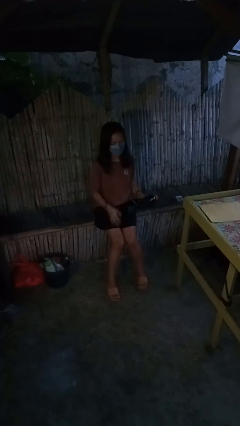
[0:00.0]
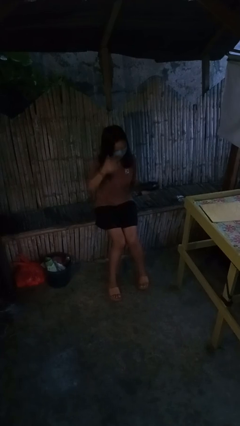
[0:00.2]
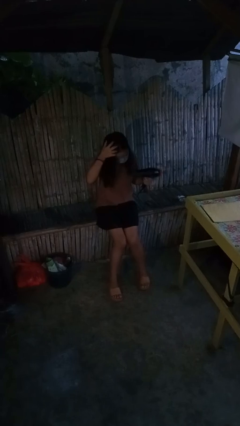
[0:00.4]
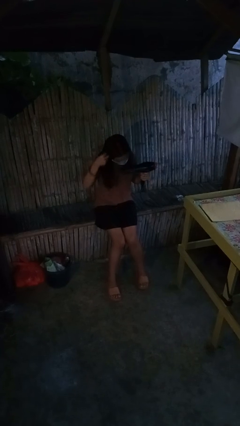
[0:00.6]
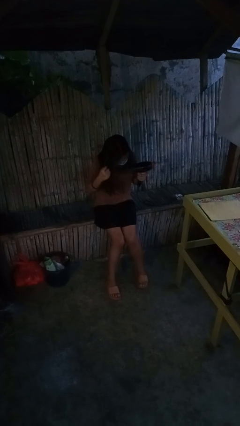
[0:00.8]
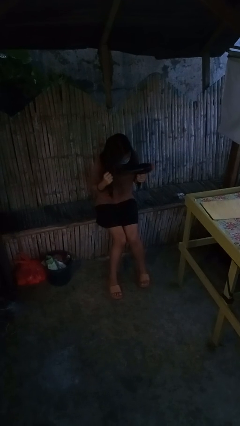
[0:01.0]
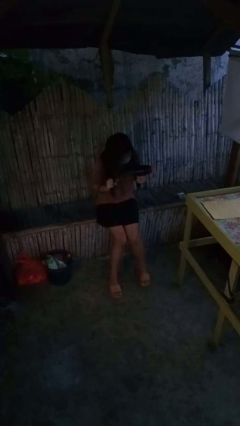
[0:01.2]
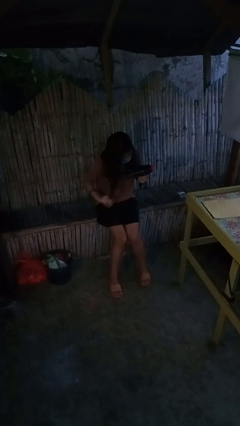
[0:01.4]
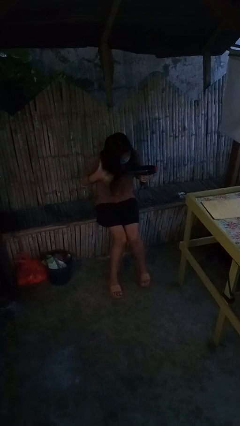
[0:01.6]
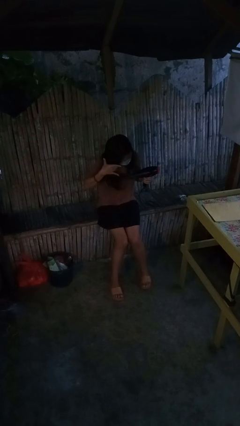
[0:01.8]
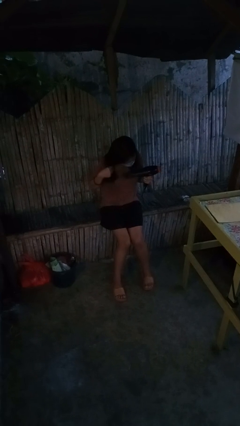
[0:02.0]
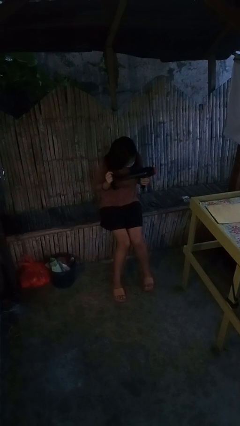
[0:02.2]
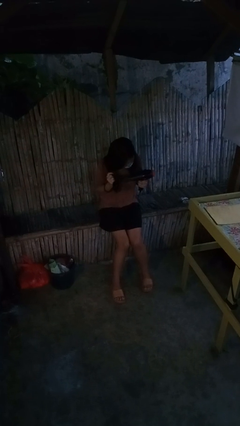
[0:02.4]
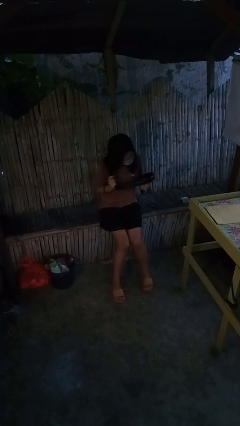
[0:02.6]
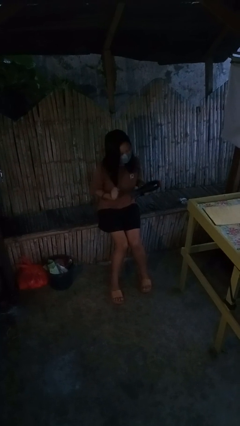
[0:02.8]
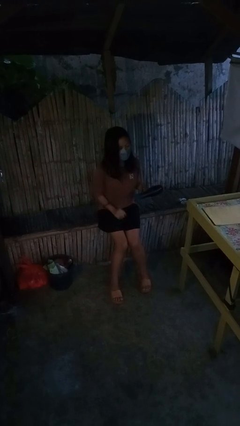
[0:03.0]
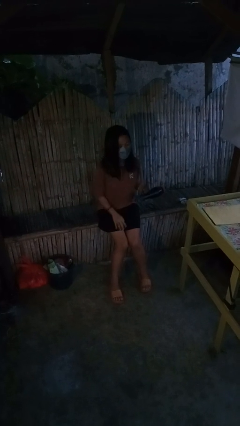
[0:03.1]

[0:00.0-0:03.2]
person dries hair with hairdryer

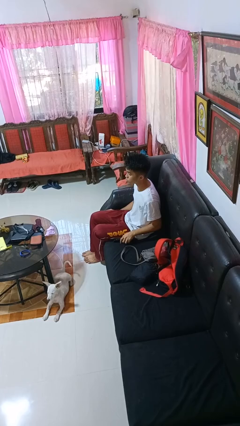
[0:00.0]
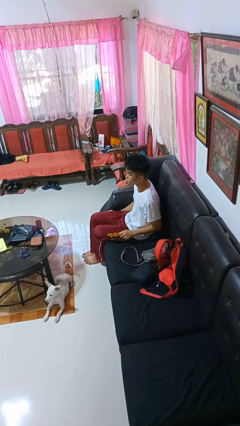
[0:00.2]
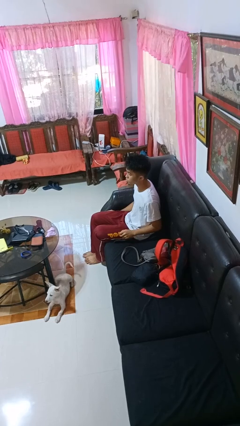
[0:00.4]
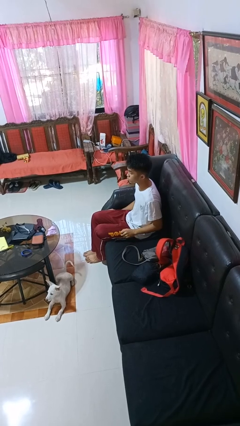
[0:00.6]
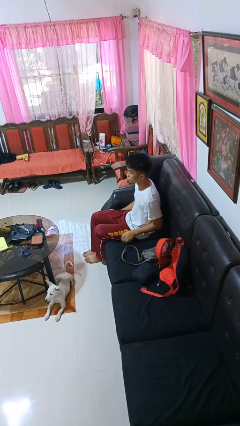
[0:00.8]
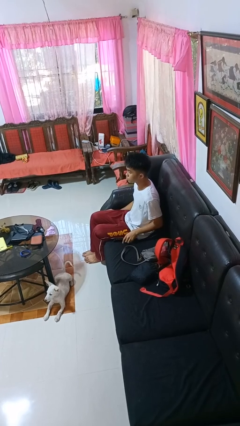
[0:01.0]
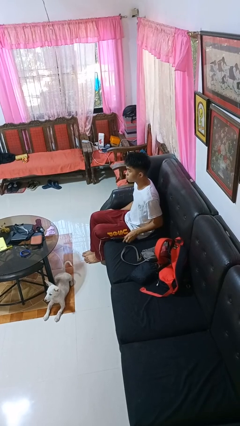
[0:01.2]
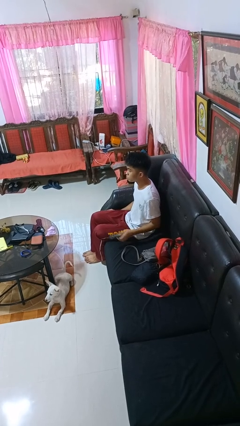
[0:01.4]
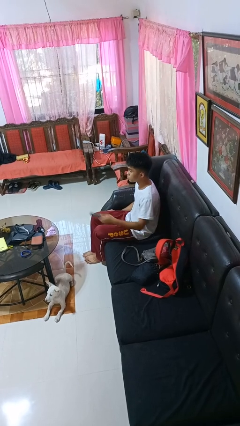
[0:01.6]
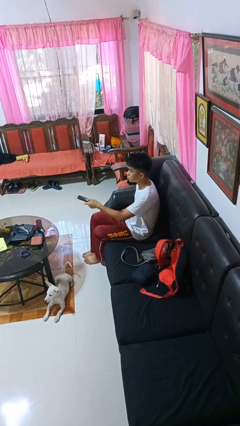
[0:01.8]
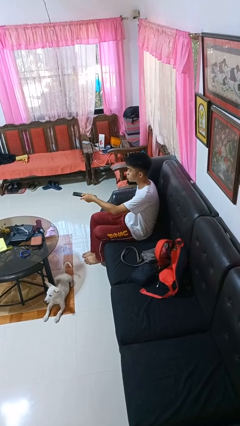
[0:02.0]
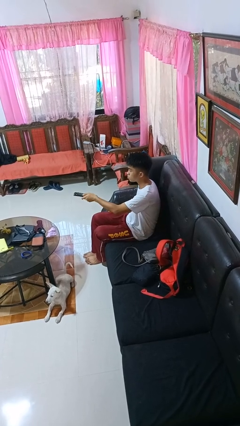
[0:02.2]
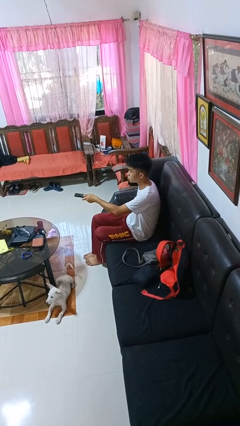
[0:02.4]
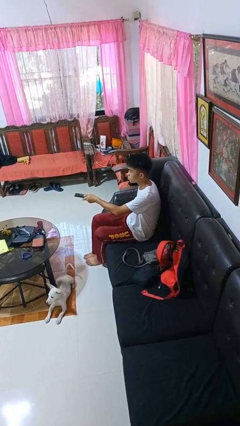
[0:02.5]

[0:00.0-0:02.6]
person picks up object from shelf

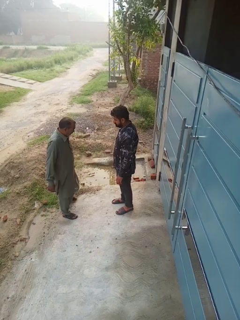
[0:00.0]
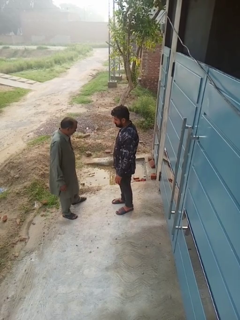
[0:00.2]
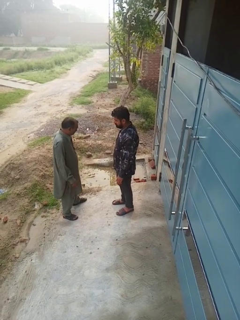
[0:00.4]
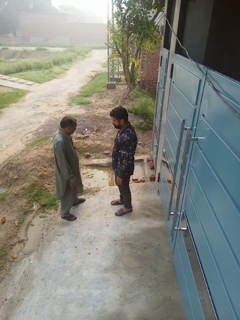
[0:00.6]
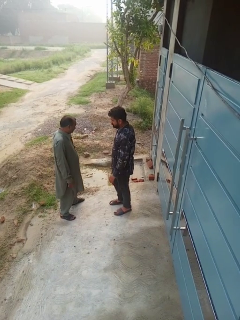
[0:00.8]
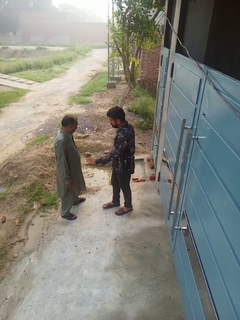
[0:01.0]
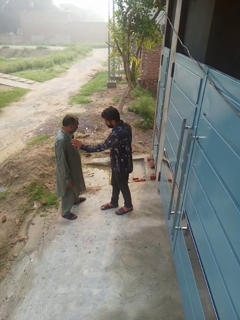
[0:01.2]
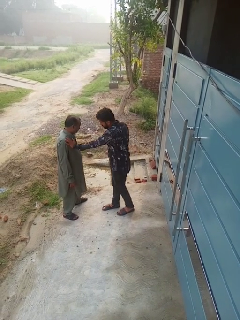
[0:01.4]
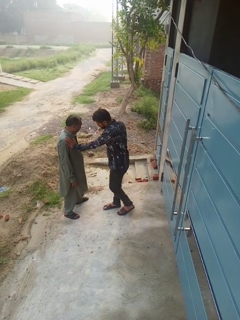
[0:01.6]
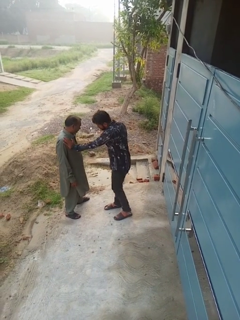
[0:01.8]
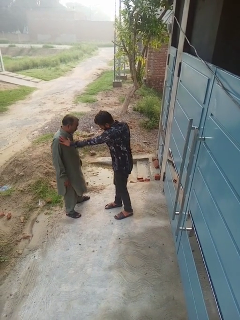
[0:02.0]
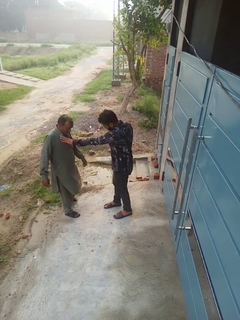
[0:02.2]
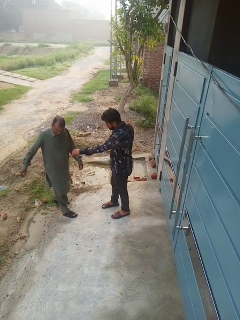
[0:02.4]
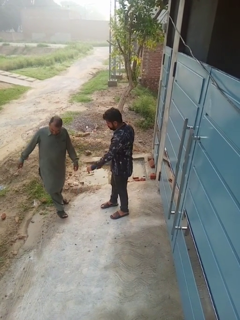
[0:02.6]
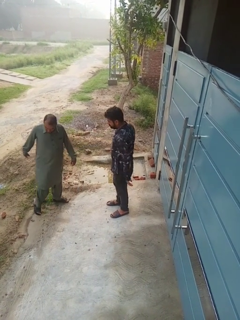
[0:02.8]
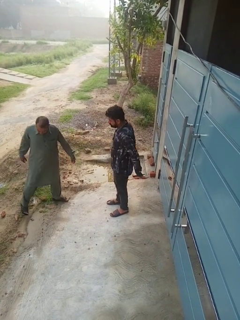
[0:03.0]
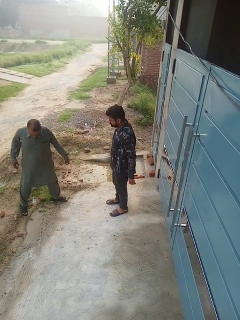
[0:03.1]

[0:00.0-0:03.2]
person shoves person

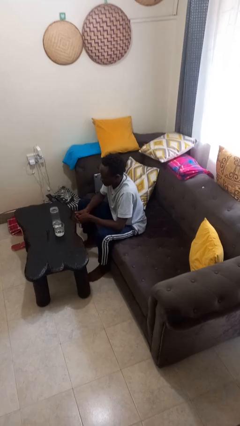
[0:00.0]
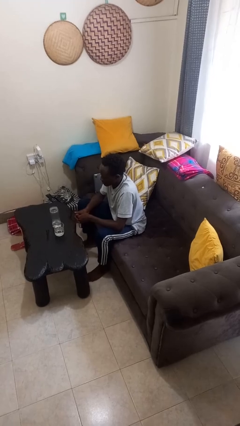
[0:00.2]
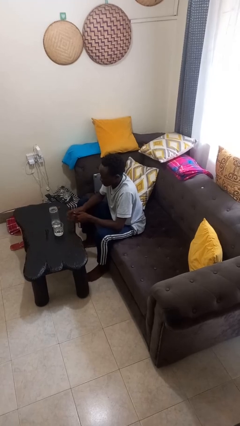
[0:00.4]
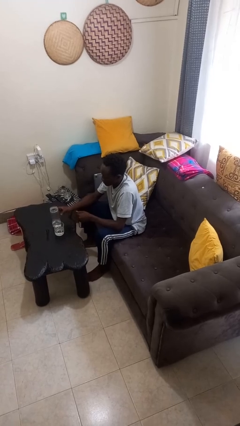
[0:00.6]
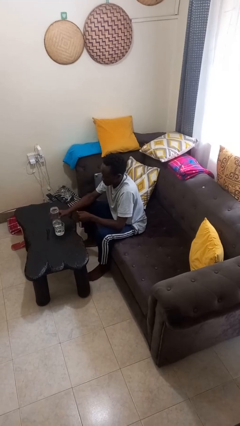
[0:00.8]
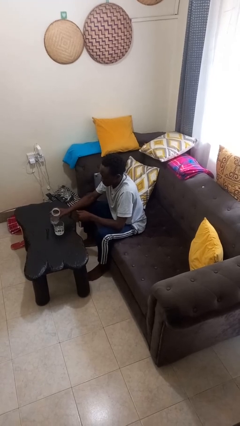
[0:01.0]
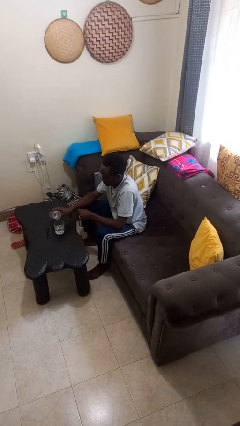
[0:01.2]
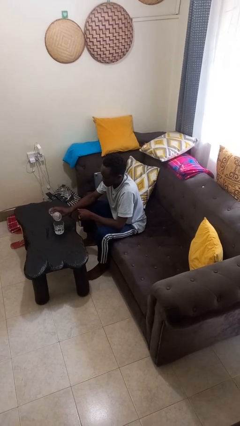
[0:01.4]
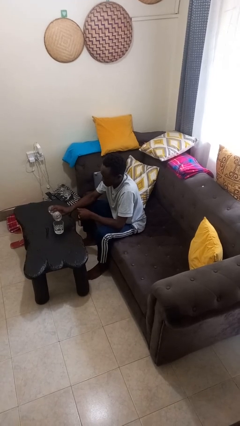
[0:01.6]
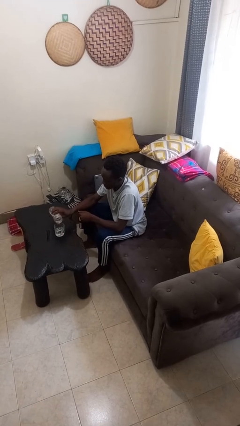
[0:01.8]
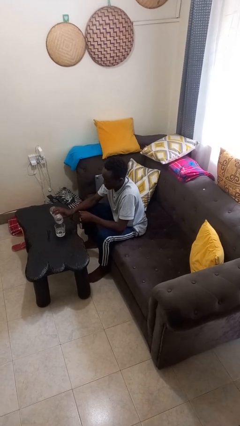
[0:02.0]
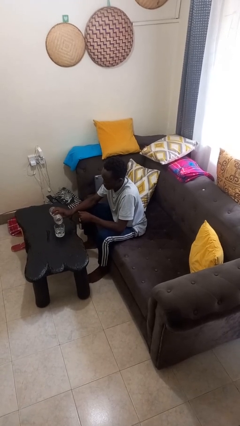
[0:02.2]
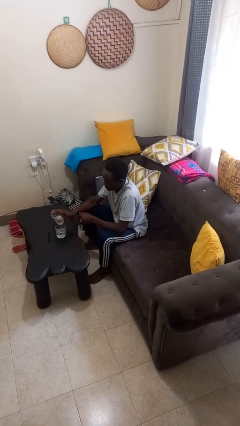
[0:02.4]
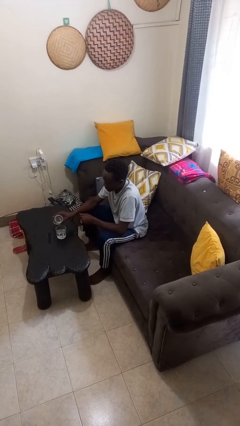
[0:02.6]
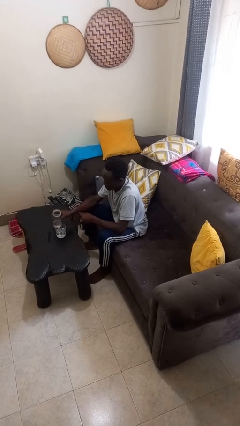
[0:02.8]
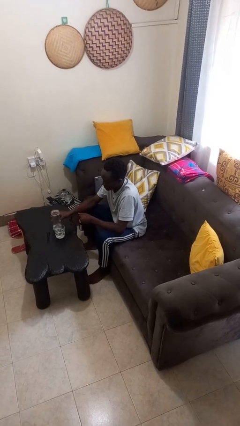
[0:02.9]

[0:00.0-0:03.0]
person pours liquid into cup

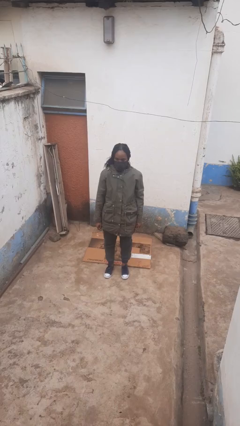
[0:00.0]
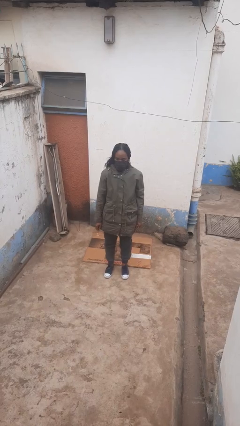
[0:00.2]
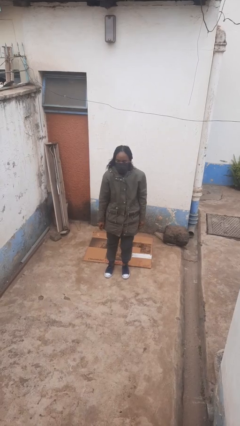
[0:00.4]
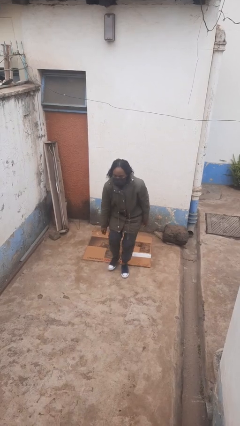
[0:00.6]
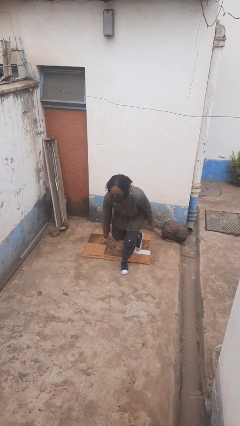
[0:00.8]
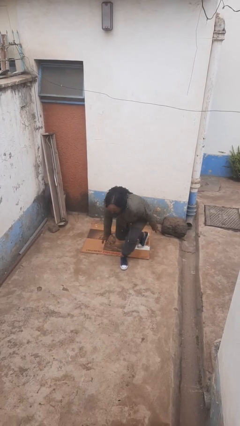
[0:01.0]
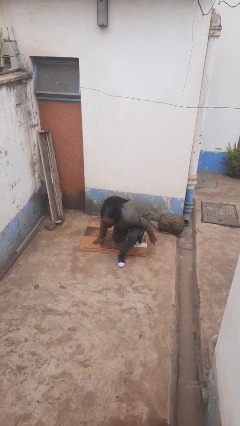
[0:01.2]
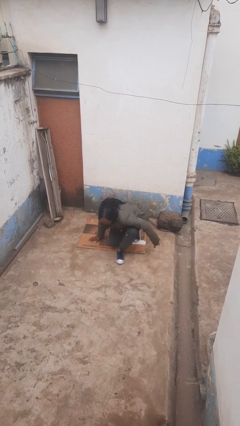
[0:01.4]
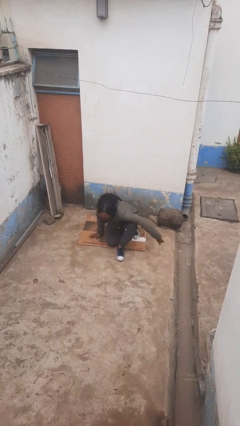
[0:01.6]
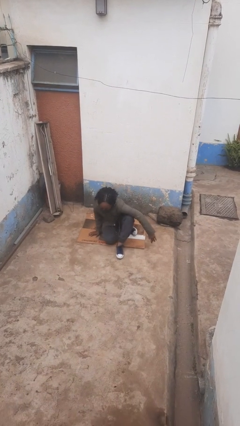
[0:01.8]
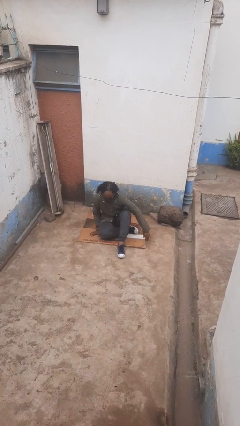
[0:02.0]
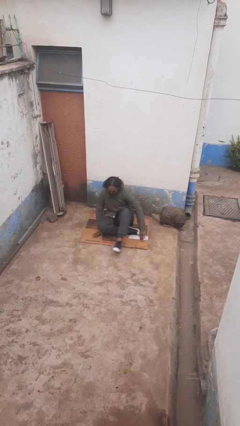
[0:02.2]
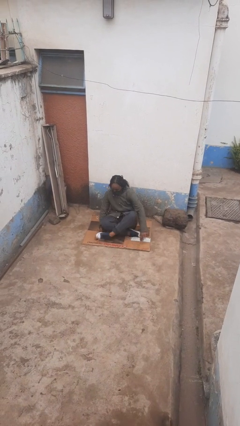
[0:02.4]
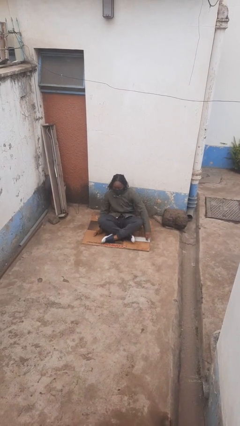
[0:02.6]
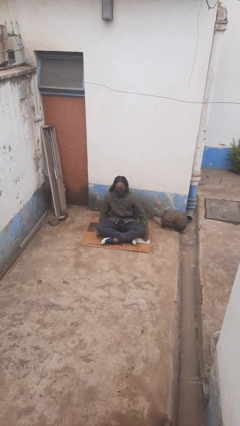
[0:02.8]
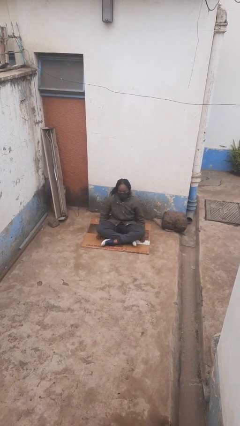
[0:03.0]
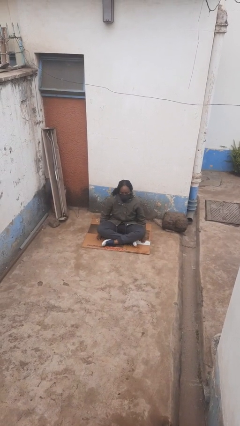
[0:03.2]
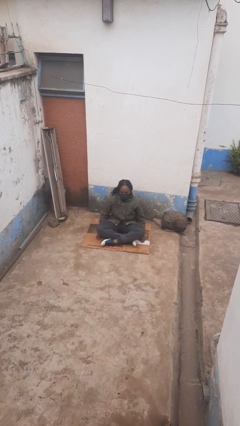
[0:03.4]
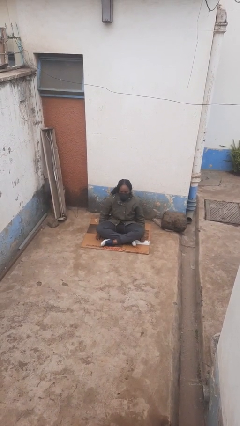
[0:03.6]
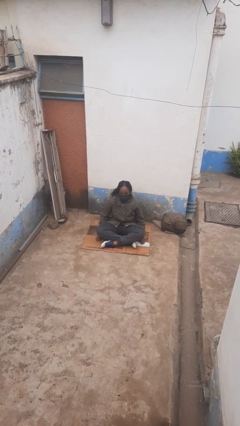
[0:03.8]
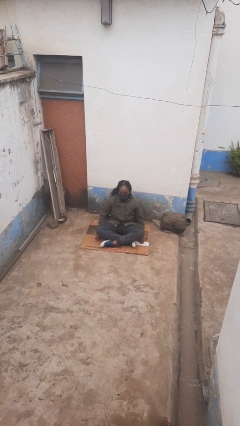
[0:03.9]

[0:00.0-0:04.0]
person sits crisscross

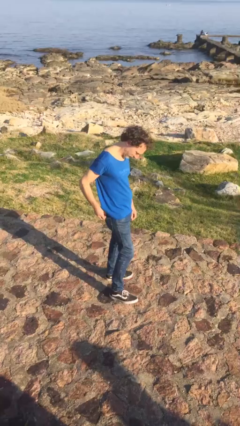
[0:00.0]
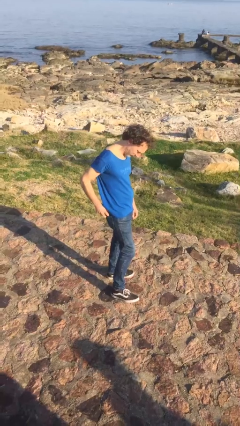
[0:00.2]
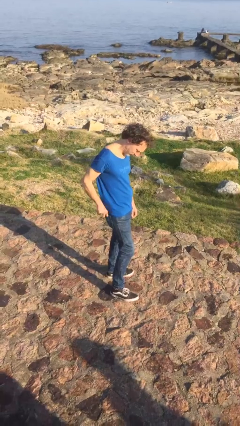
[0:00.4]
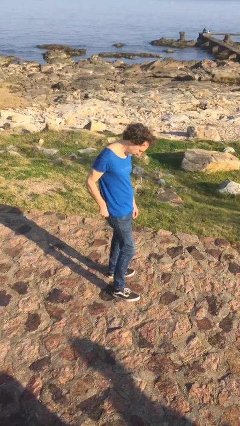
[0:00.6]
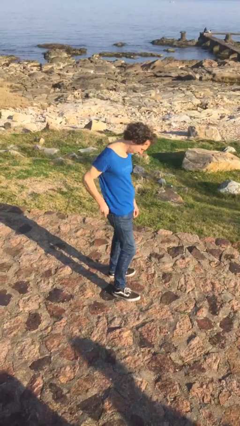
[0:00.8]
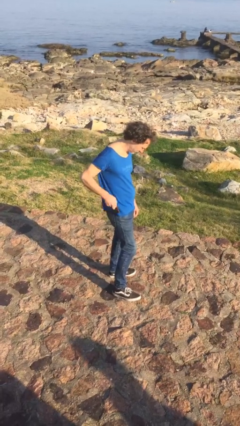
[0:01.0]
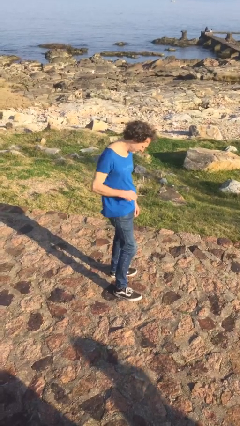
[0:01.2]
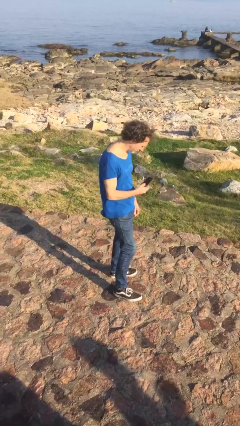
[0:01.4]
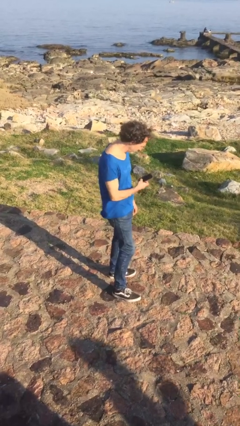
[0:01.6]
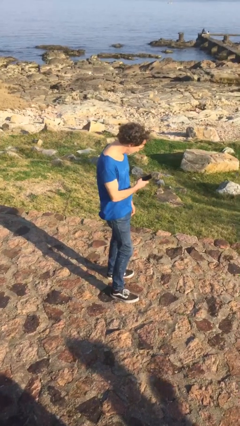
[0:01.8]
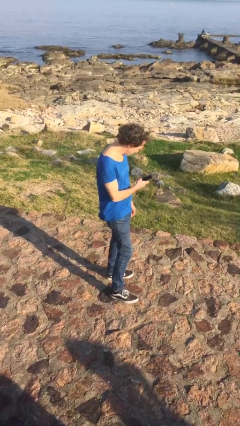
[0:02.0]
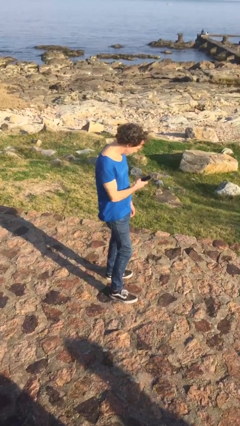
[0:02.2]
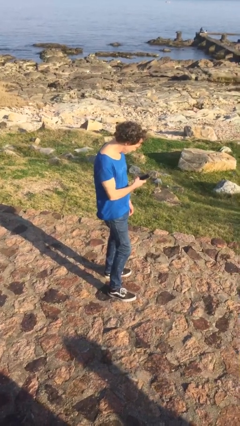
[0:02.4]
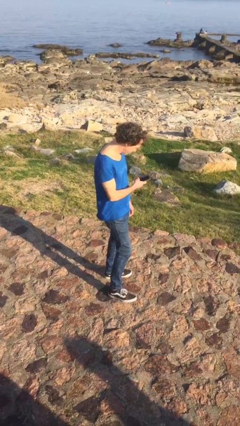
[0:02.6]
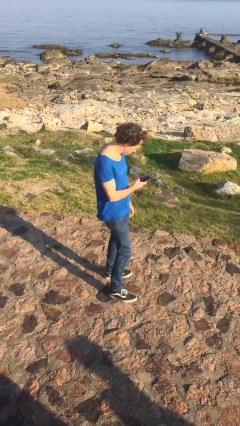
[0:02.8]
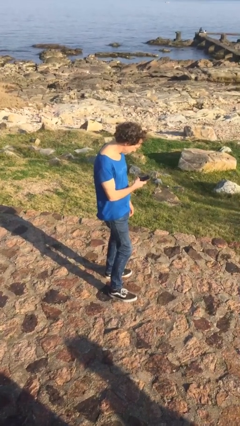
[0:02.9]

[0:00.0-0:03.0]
person takes phone from pocket
